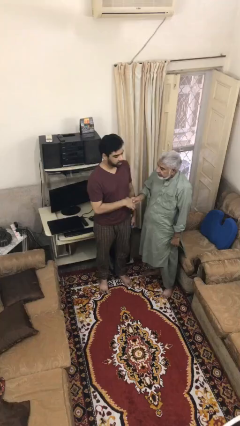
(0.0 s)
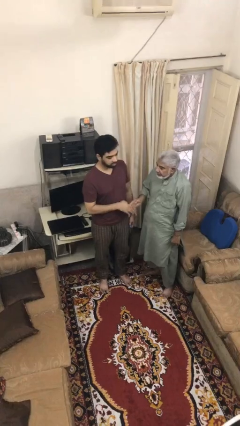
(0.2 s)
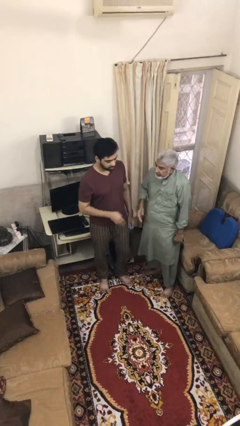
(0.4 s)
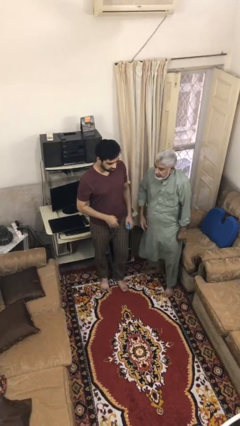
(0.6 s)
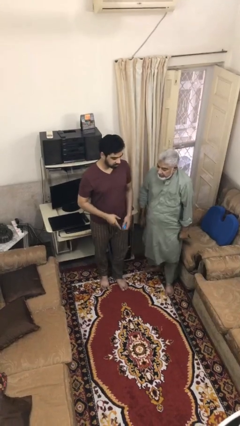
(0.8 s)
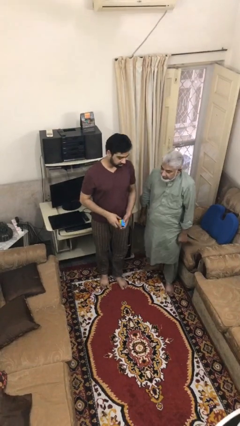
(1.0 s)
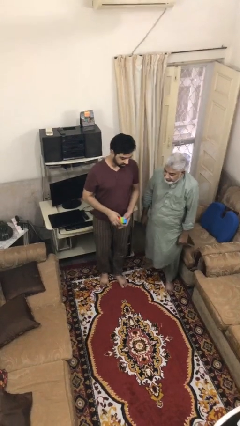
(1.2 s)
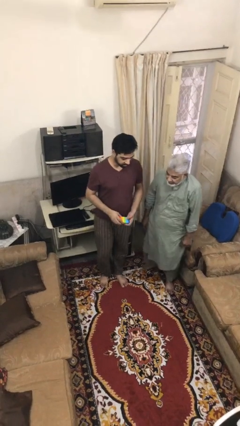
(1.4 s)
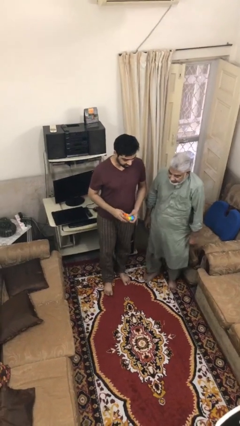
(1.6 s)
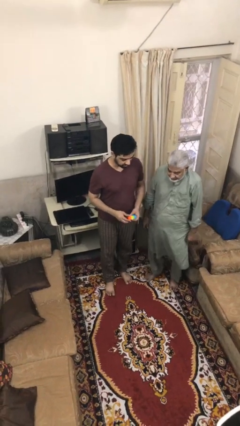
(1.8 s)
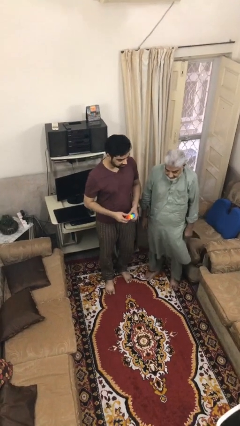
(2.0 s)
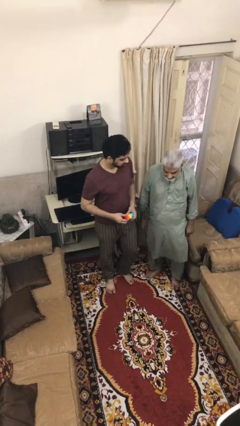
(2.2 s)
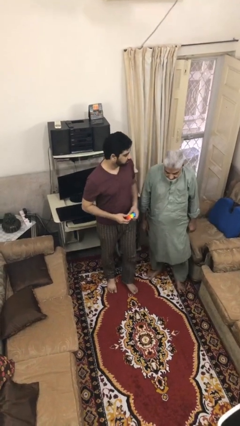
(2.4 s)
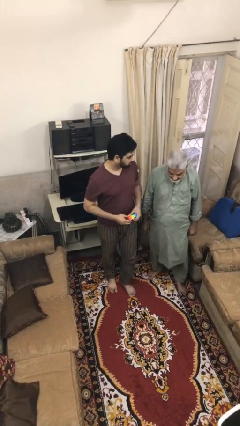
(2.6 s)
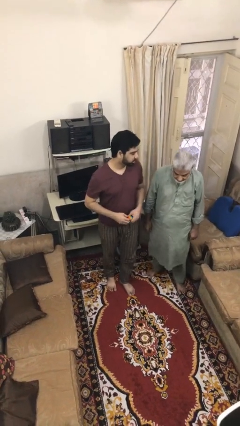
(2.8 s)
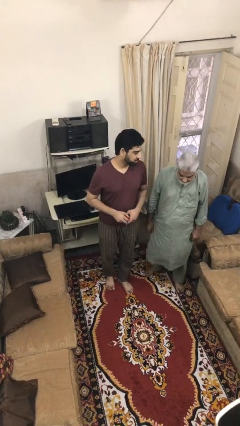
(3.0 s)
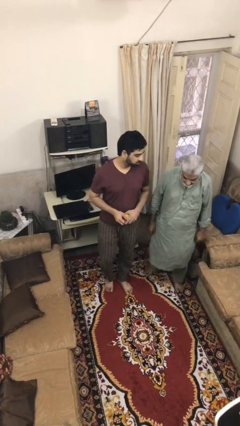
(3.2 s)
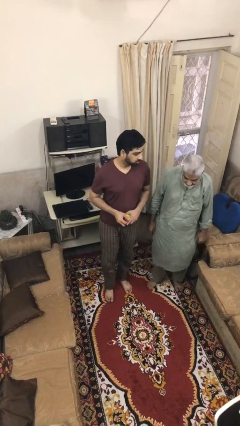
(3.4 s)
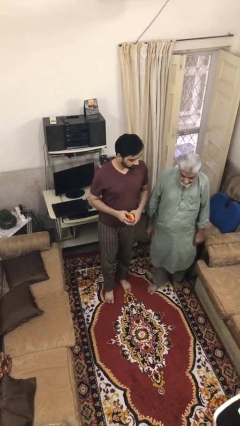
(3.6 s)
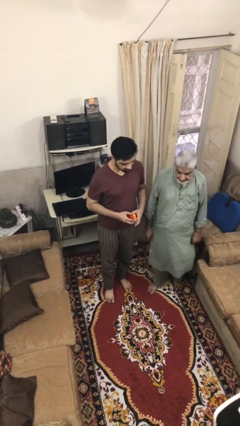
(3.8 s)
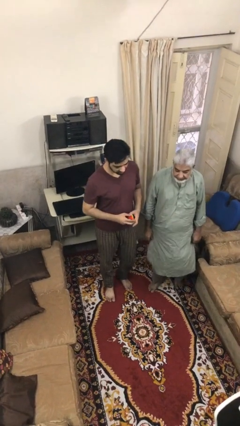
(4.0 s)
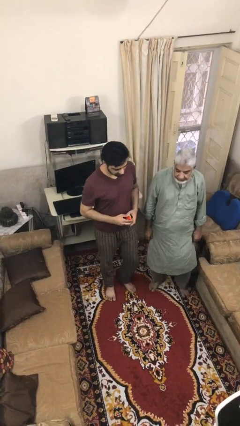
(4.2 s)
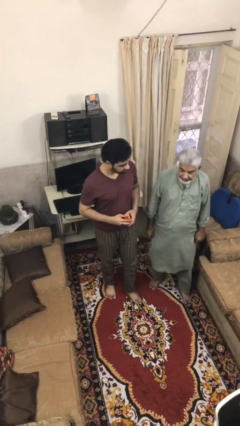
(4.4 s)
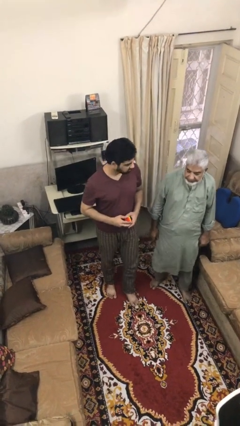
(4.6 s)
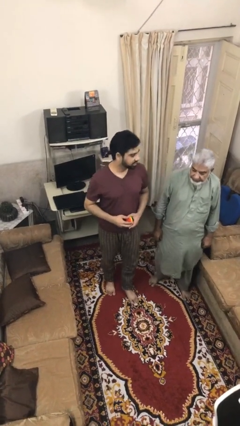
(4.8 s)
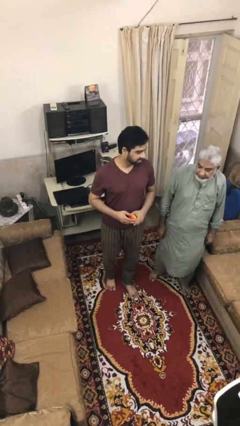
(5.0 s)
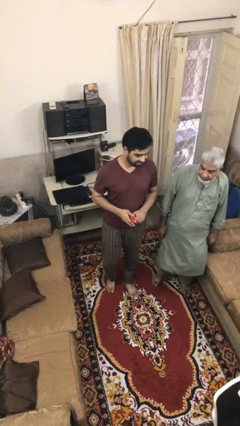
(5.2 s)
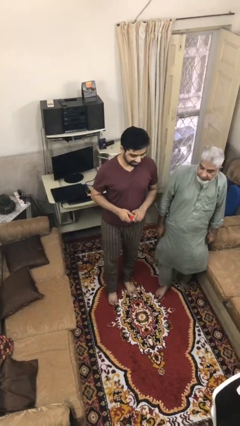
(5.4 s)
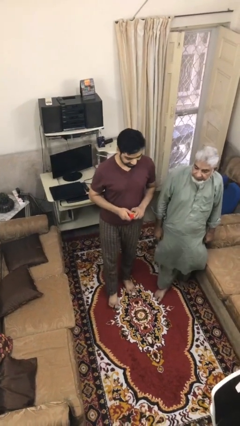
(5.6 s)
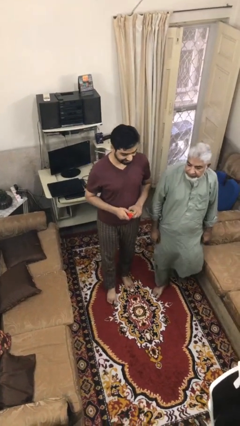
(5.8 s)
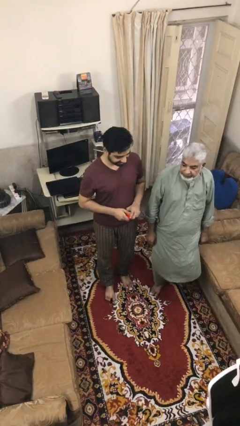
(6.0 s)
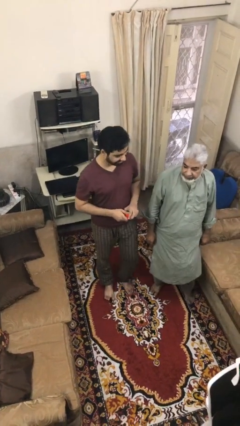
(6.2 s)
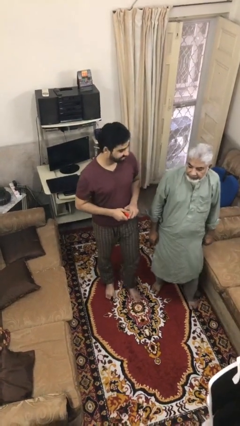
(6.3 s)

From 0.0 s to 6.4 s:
person talks to person

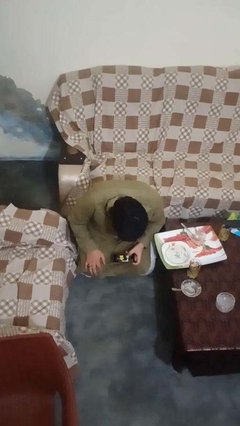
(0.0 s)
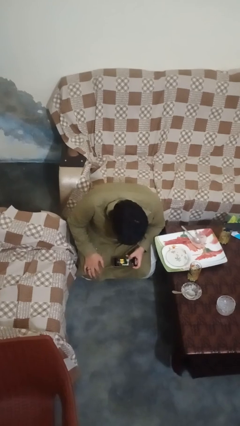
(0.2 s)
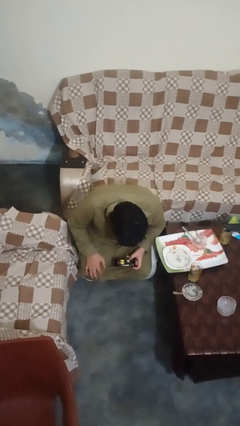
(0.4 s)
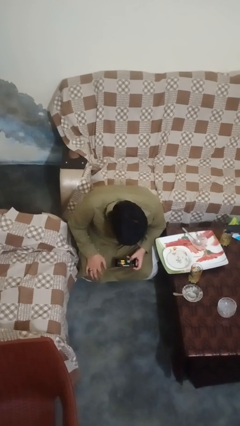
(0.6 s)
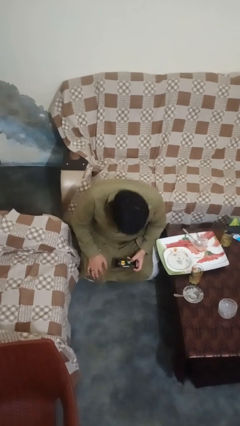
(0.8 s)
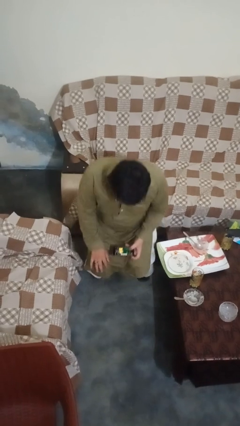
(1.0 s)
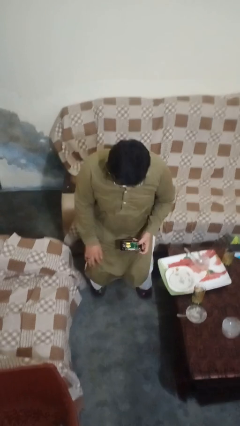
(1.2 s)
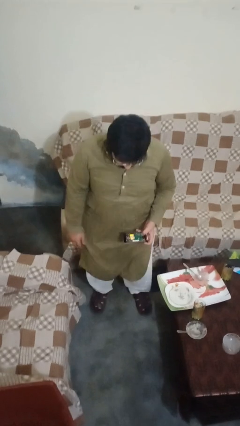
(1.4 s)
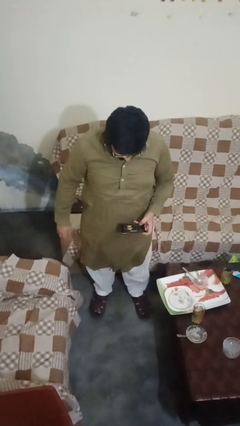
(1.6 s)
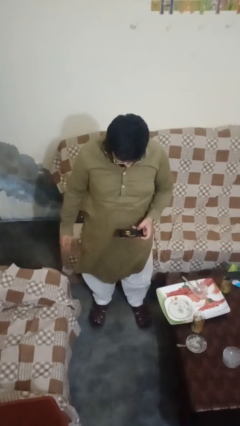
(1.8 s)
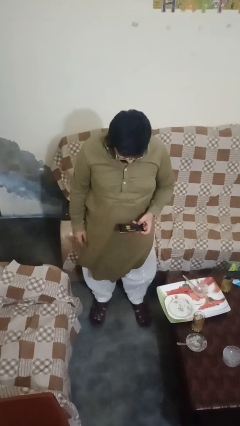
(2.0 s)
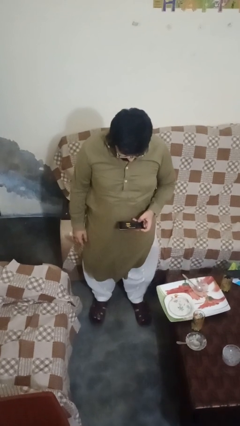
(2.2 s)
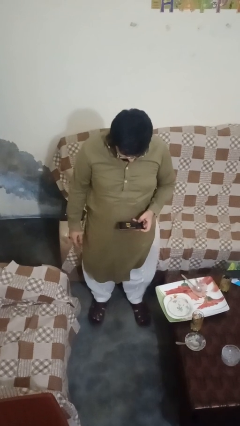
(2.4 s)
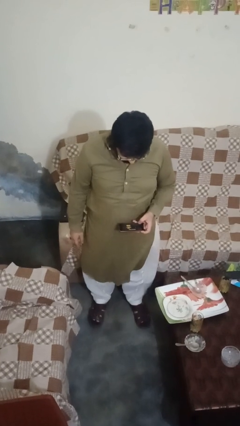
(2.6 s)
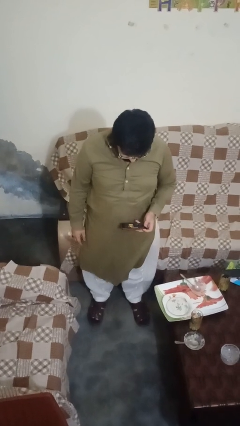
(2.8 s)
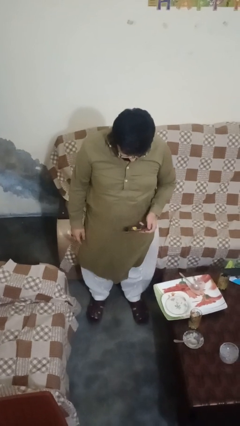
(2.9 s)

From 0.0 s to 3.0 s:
person stands up

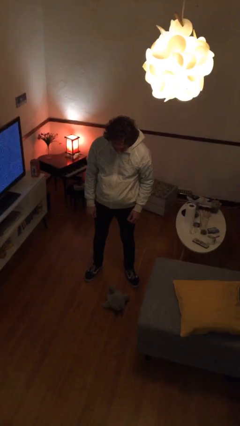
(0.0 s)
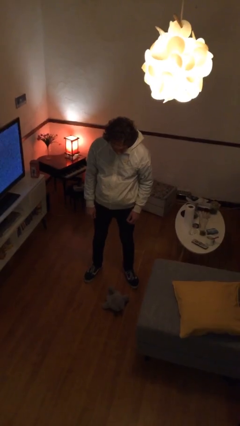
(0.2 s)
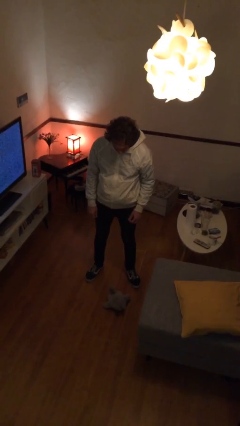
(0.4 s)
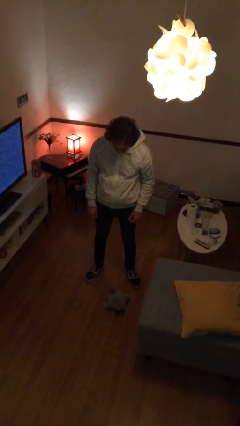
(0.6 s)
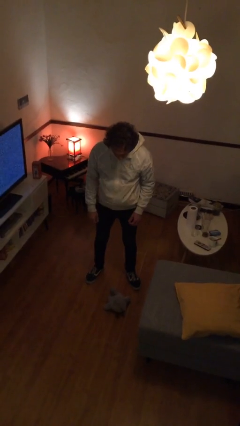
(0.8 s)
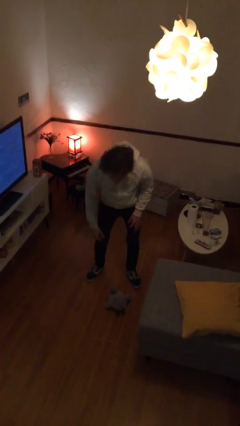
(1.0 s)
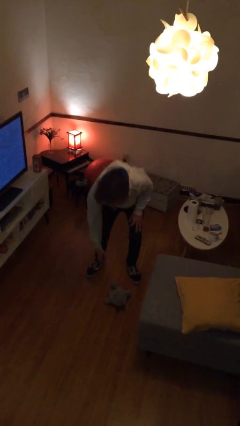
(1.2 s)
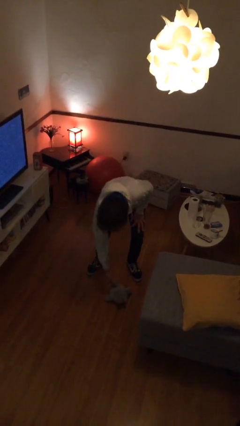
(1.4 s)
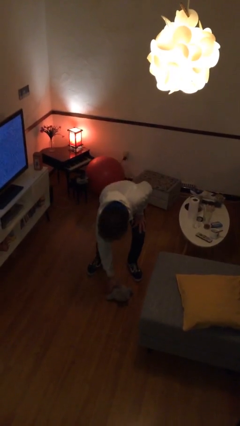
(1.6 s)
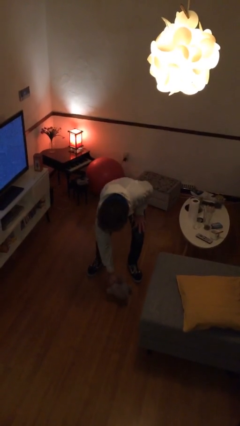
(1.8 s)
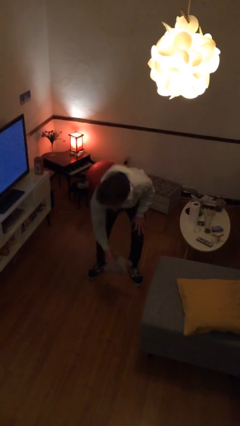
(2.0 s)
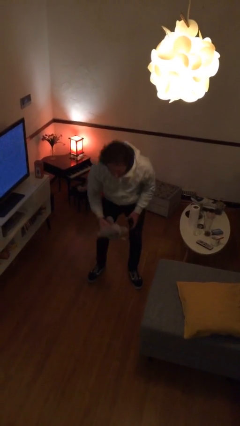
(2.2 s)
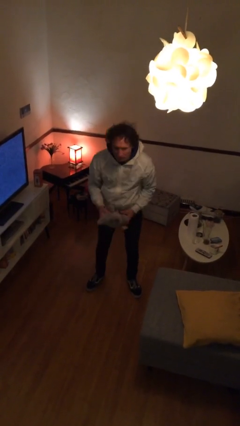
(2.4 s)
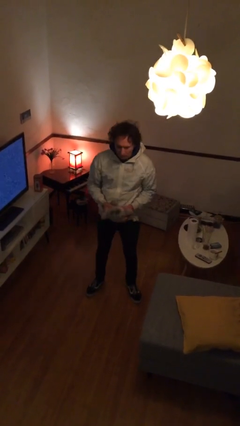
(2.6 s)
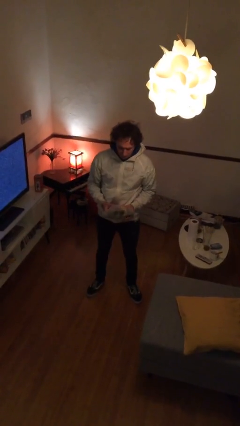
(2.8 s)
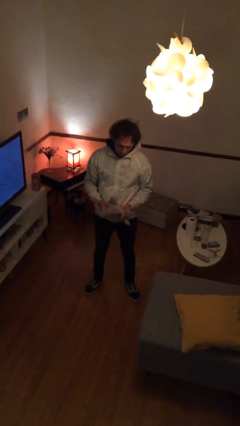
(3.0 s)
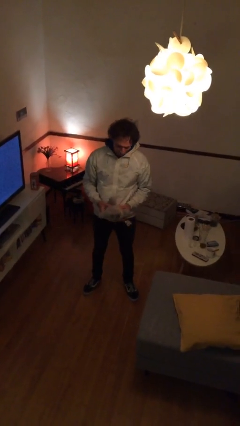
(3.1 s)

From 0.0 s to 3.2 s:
person picks up object from floor

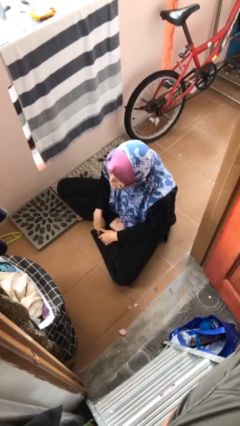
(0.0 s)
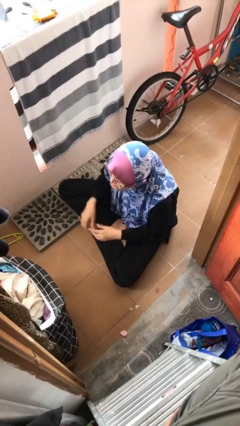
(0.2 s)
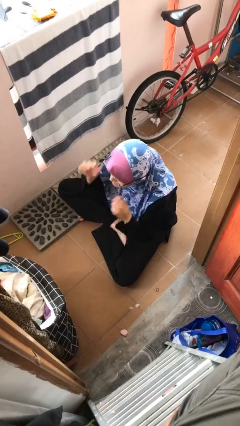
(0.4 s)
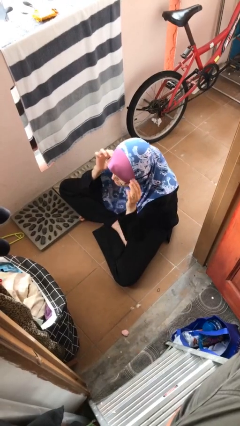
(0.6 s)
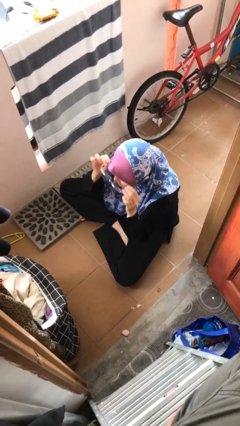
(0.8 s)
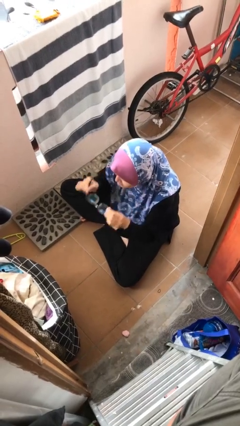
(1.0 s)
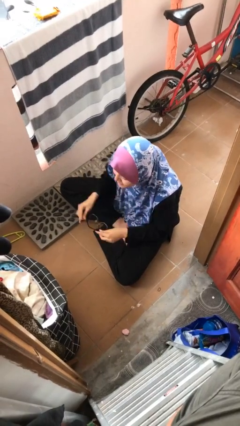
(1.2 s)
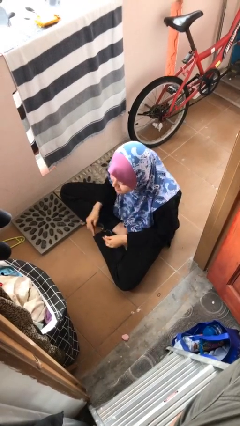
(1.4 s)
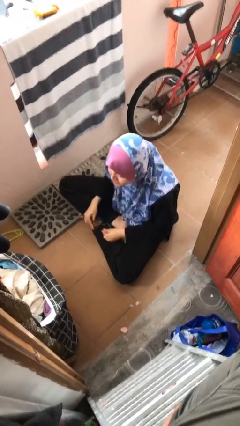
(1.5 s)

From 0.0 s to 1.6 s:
person takes off glasses

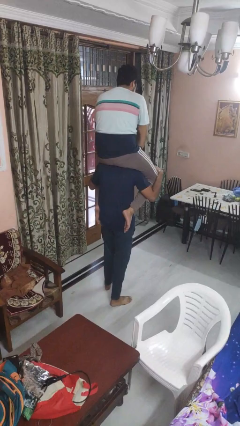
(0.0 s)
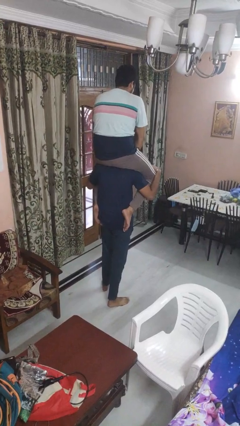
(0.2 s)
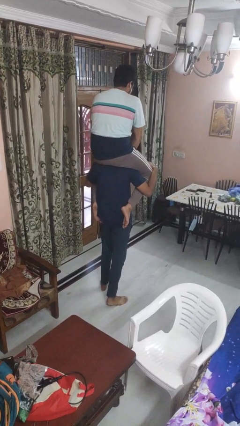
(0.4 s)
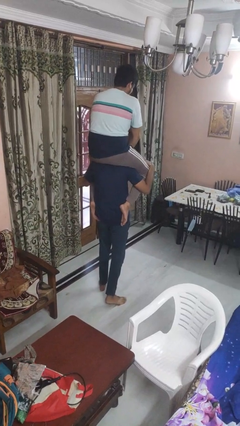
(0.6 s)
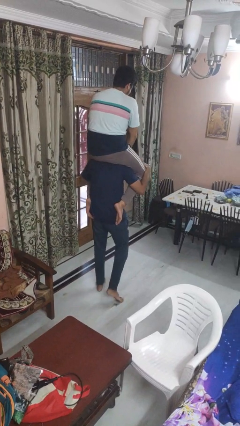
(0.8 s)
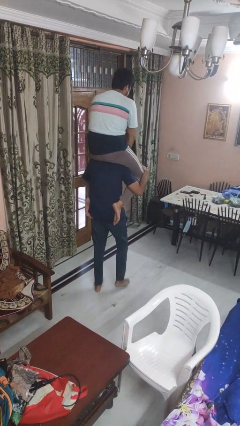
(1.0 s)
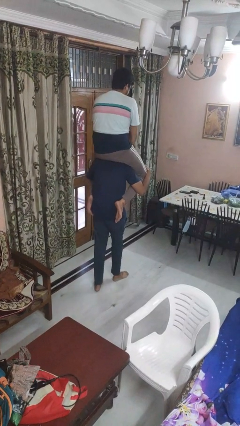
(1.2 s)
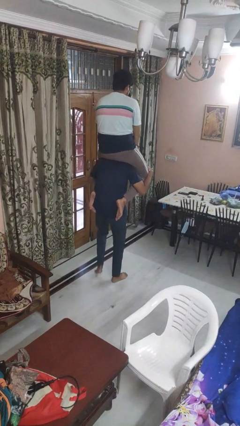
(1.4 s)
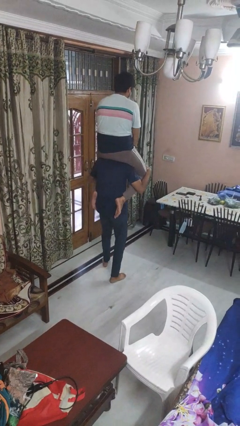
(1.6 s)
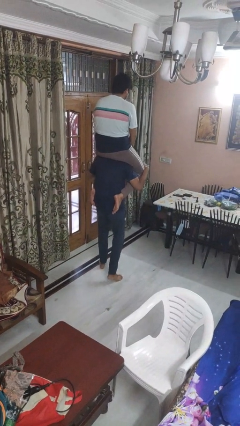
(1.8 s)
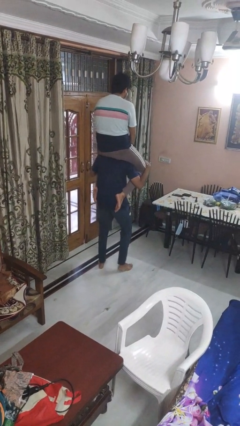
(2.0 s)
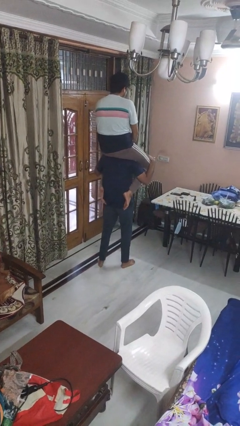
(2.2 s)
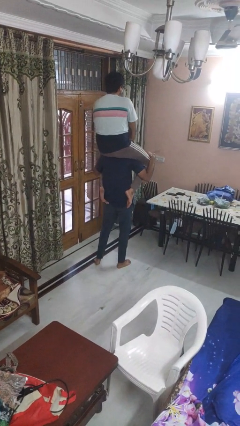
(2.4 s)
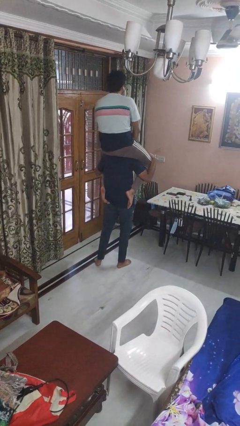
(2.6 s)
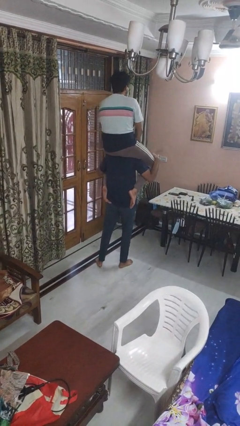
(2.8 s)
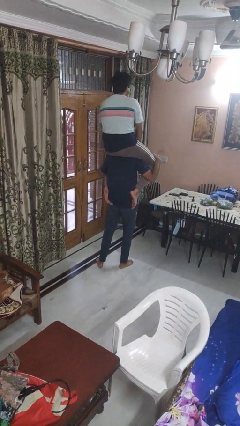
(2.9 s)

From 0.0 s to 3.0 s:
person carries person on shoulders
